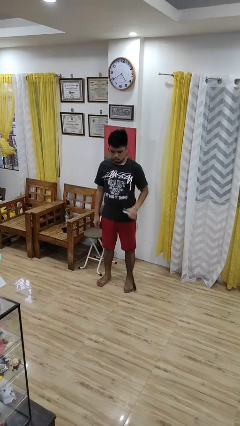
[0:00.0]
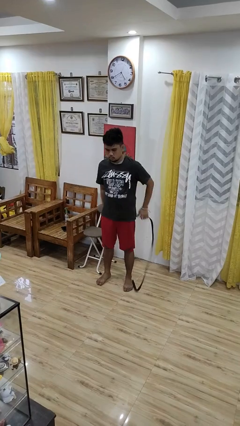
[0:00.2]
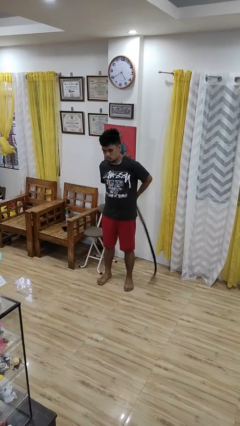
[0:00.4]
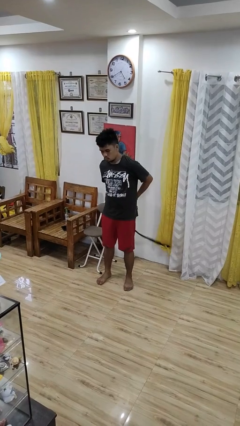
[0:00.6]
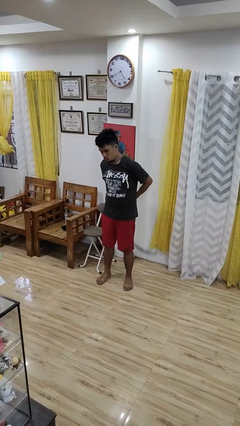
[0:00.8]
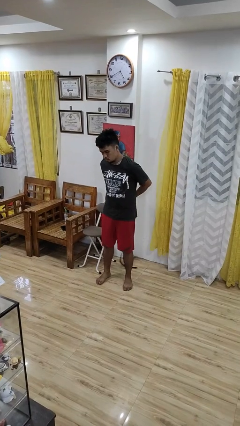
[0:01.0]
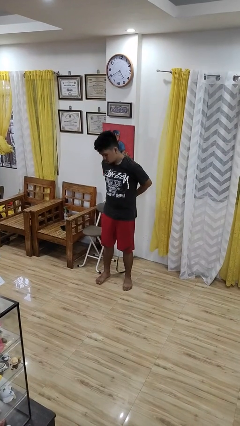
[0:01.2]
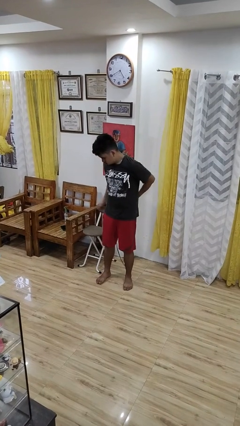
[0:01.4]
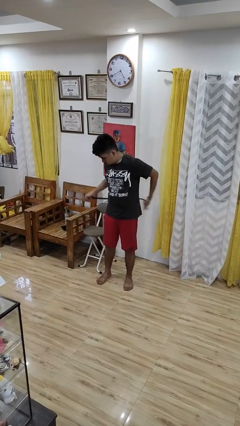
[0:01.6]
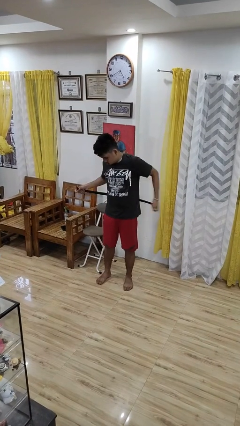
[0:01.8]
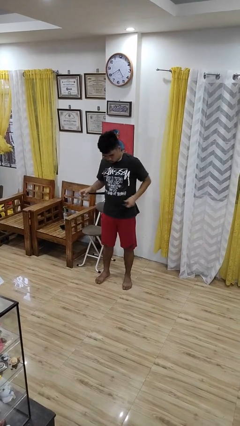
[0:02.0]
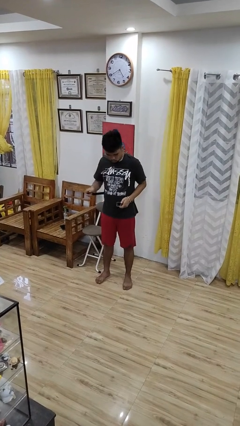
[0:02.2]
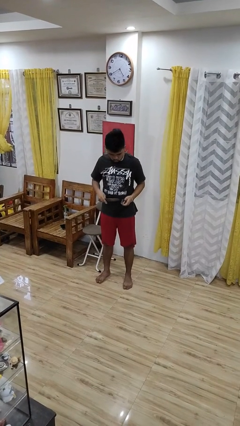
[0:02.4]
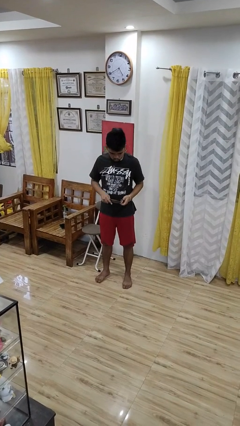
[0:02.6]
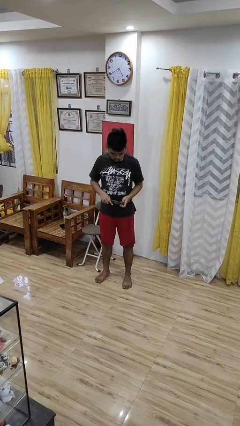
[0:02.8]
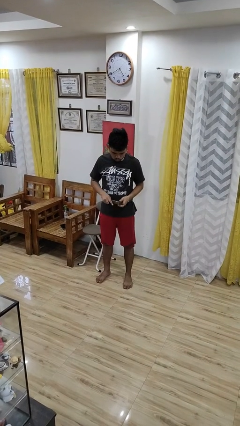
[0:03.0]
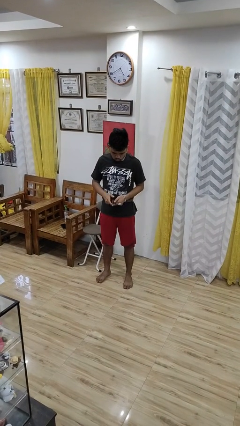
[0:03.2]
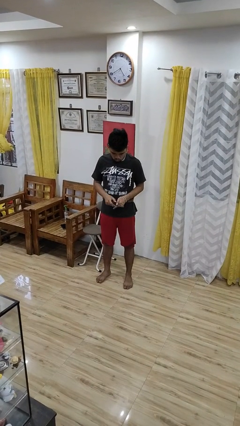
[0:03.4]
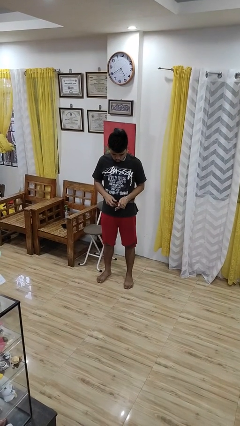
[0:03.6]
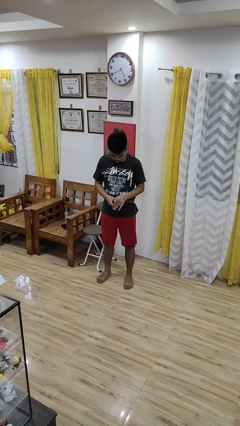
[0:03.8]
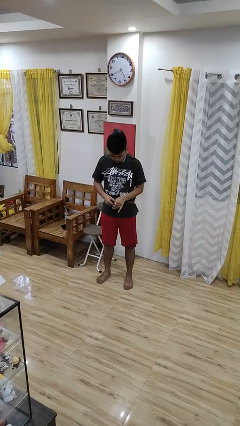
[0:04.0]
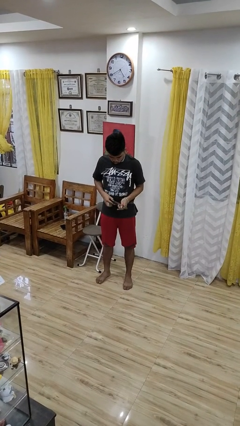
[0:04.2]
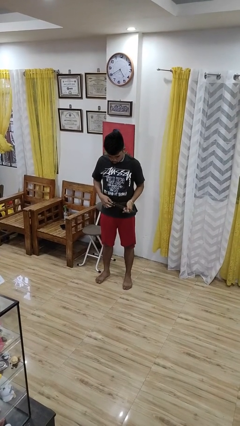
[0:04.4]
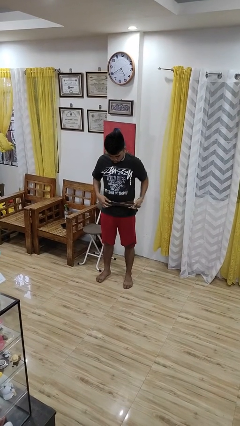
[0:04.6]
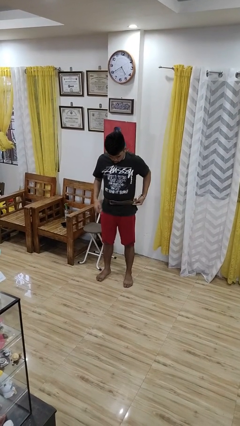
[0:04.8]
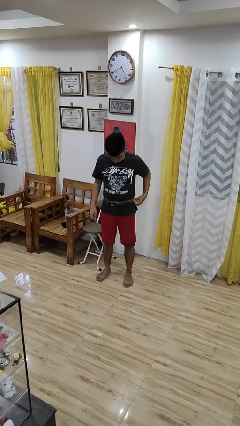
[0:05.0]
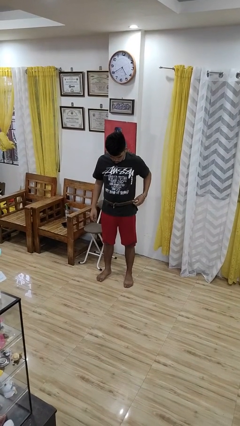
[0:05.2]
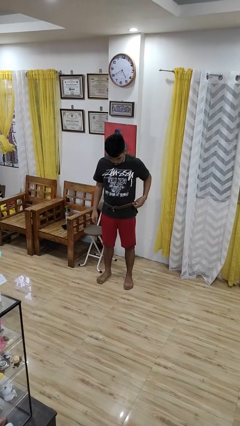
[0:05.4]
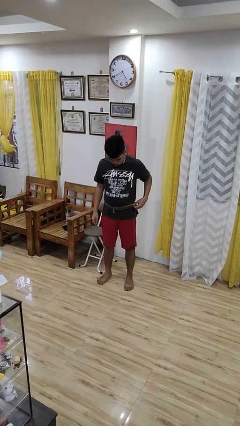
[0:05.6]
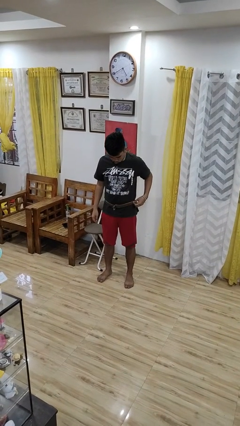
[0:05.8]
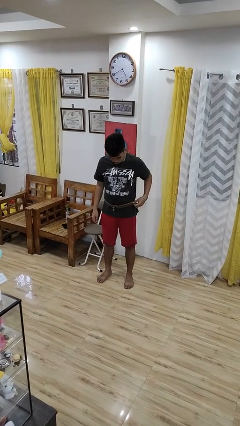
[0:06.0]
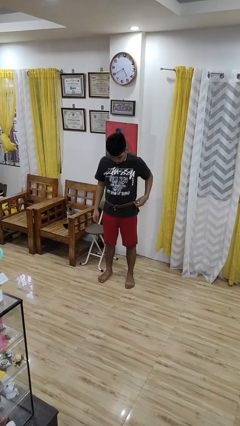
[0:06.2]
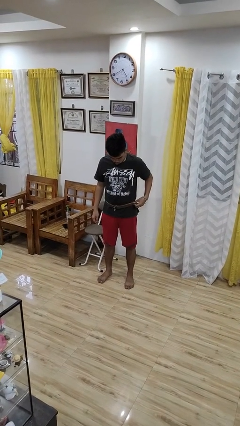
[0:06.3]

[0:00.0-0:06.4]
person puts on belt

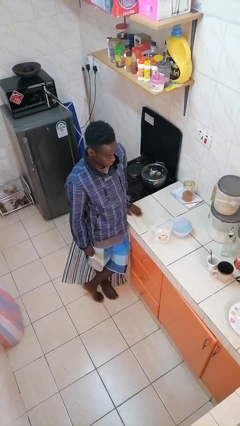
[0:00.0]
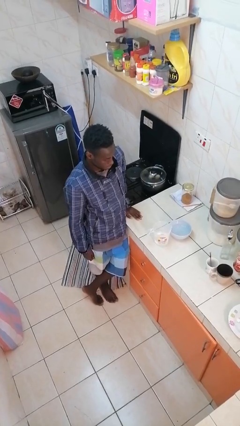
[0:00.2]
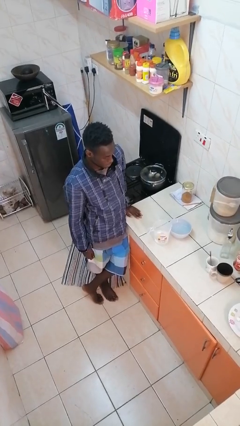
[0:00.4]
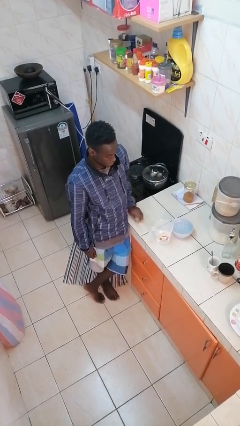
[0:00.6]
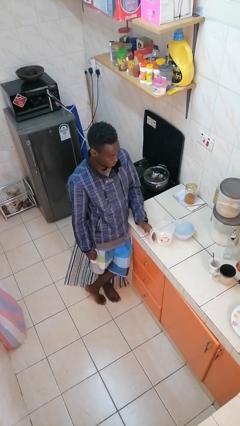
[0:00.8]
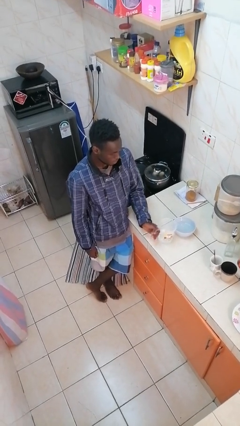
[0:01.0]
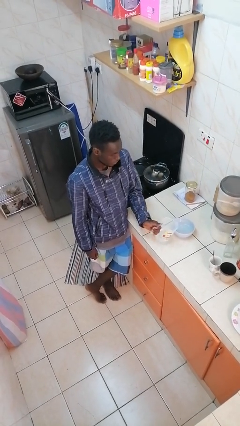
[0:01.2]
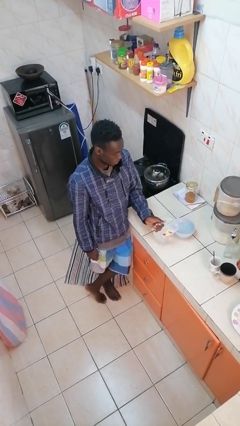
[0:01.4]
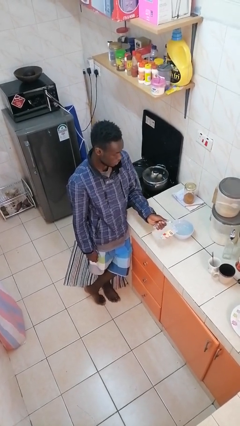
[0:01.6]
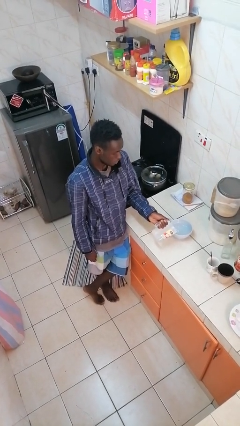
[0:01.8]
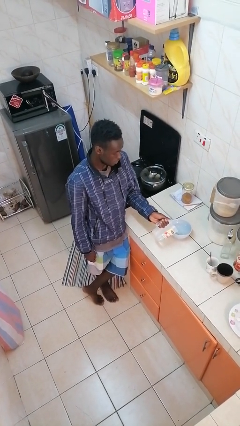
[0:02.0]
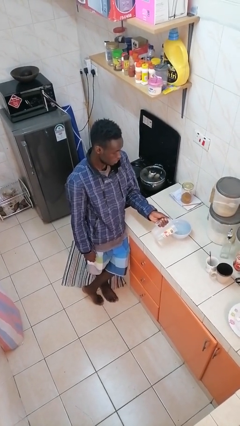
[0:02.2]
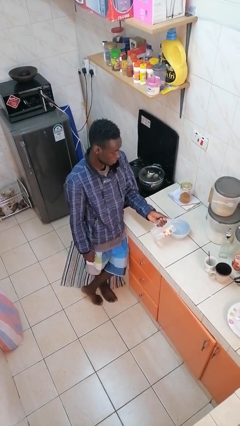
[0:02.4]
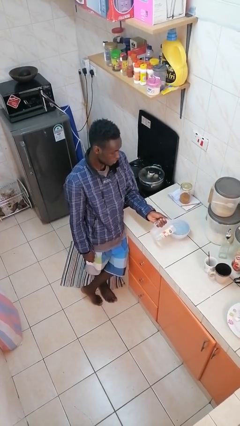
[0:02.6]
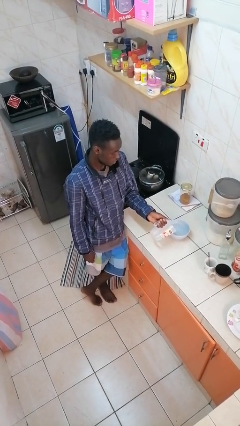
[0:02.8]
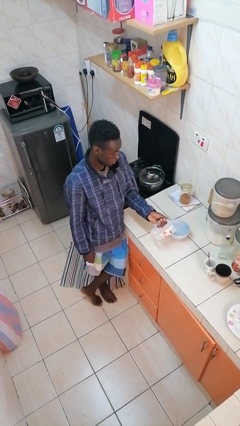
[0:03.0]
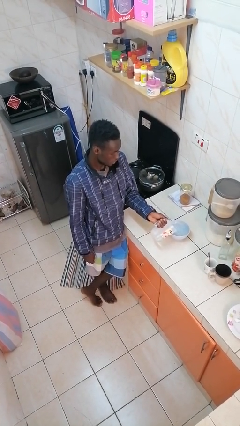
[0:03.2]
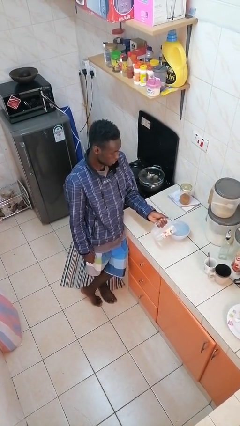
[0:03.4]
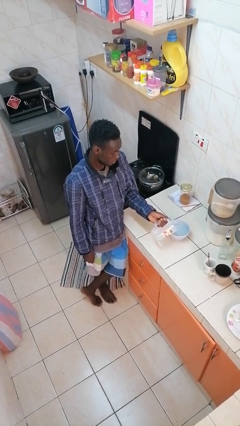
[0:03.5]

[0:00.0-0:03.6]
person pours into bowl

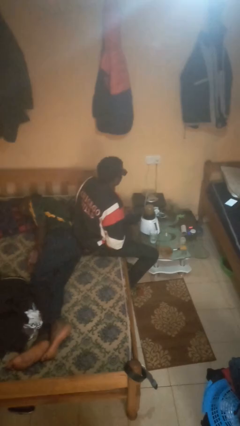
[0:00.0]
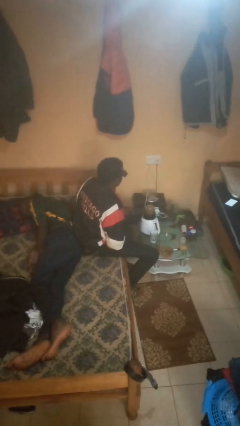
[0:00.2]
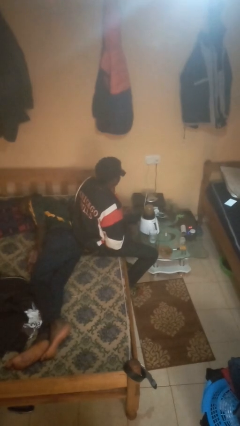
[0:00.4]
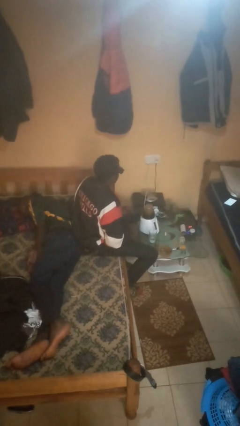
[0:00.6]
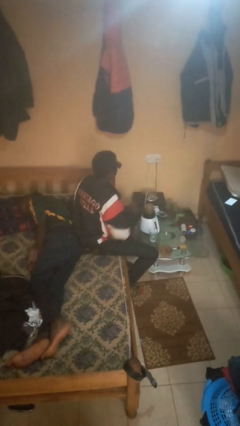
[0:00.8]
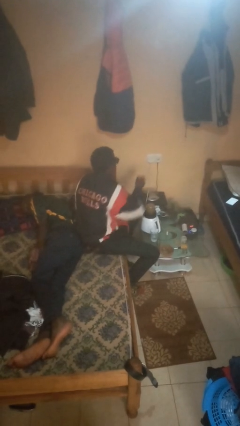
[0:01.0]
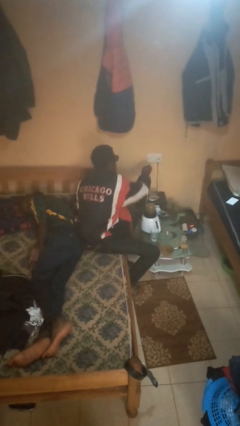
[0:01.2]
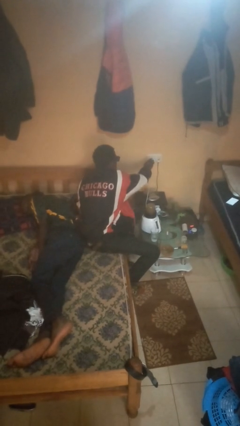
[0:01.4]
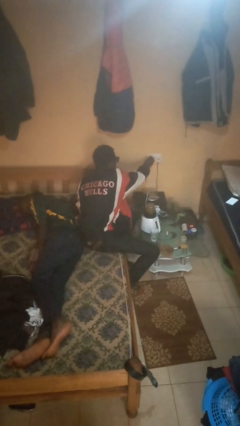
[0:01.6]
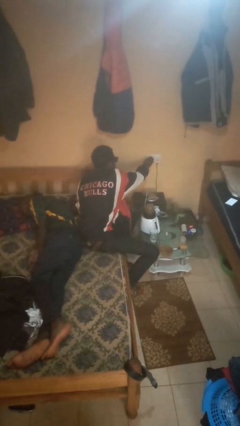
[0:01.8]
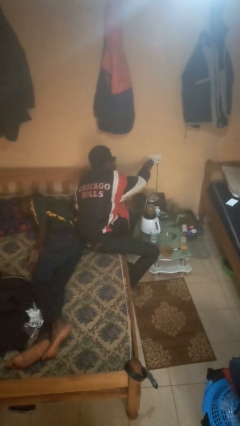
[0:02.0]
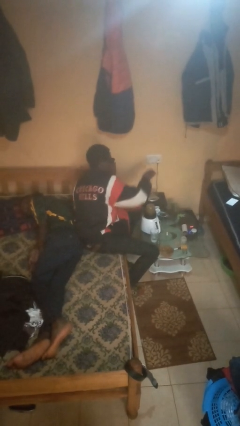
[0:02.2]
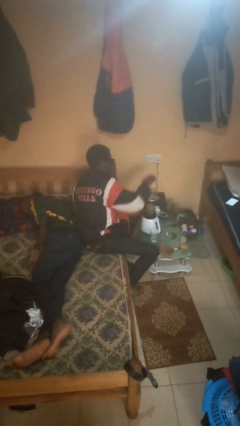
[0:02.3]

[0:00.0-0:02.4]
person unplugs from electrical socket

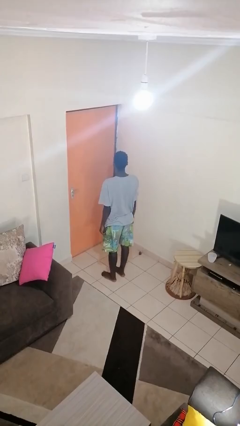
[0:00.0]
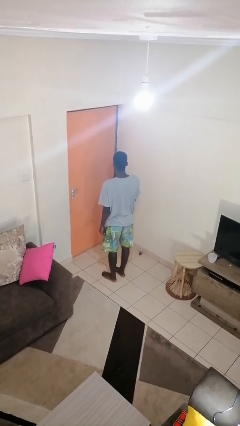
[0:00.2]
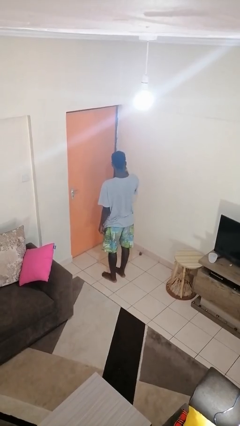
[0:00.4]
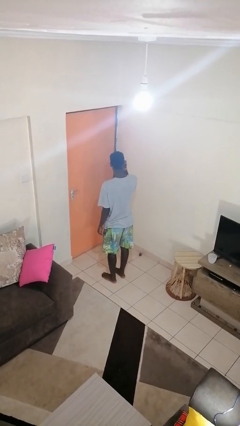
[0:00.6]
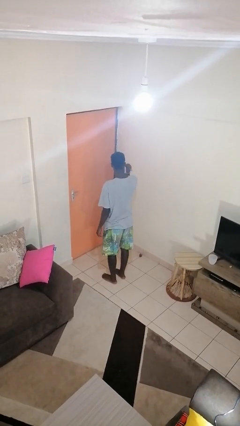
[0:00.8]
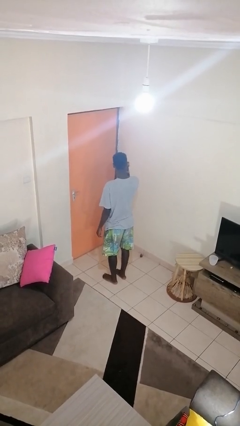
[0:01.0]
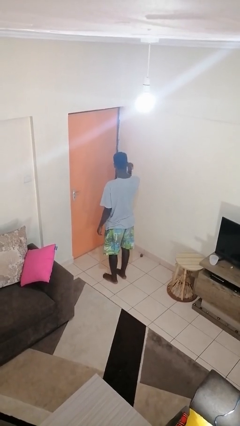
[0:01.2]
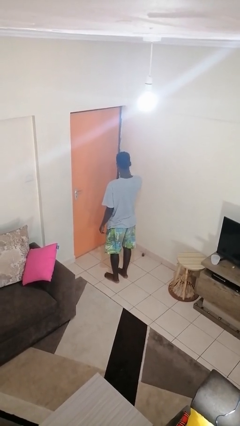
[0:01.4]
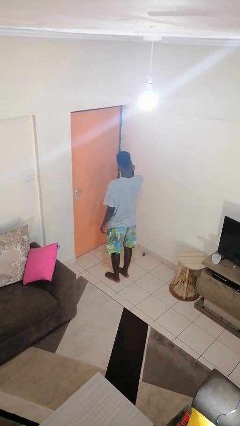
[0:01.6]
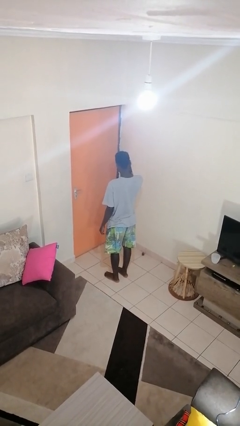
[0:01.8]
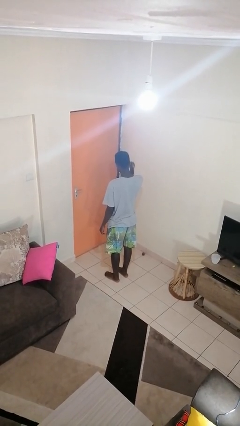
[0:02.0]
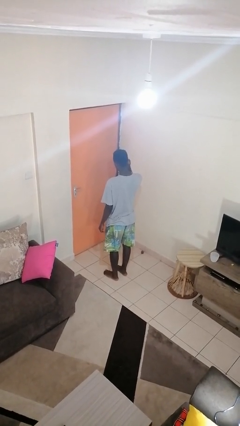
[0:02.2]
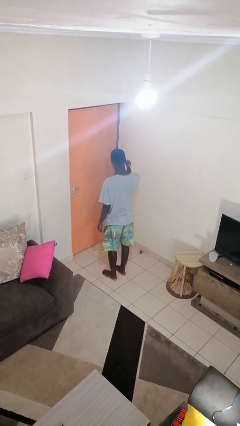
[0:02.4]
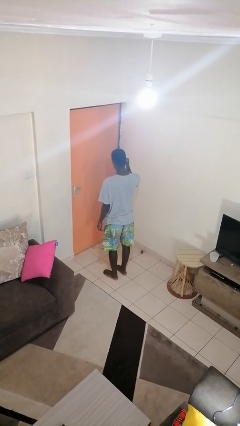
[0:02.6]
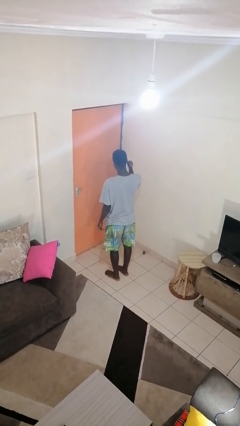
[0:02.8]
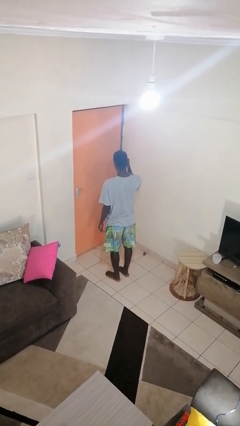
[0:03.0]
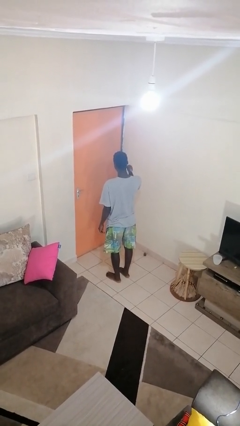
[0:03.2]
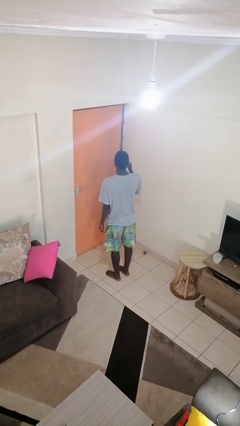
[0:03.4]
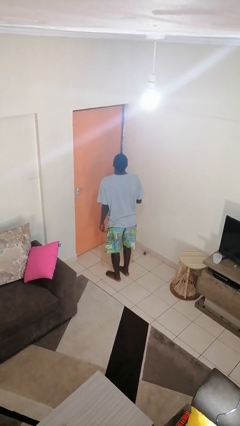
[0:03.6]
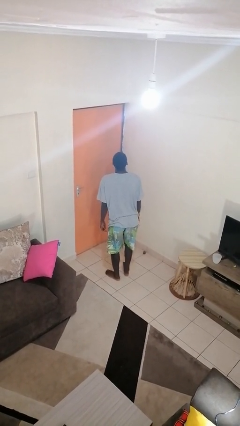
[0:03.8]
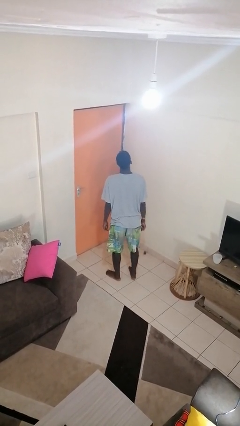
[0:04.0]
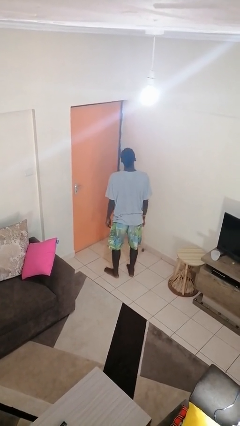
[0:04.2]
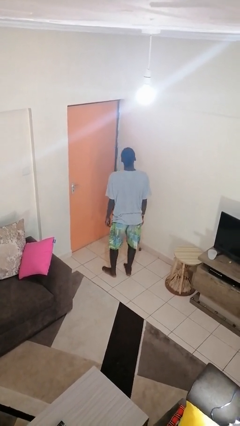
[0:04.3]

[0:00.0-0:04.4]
person gestures behind me

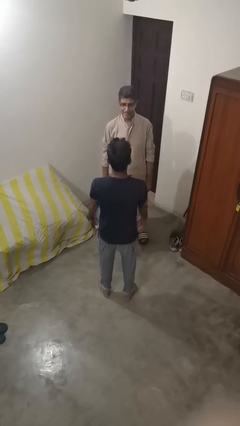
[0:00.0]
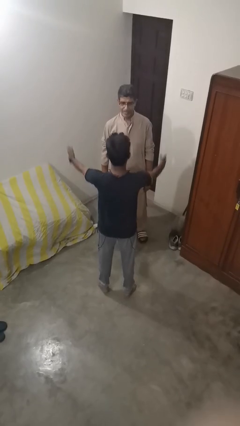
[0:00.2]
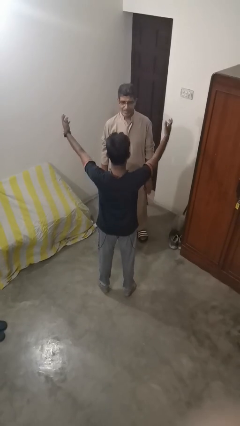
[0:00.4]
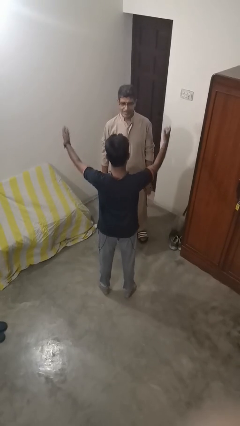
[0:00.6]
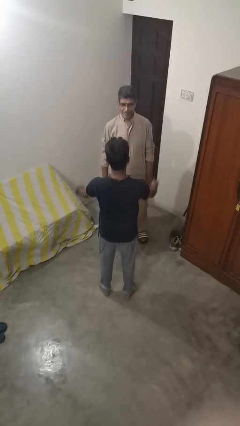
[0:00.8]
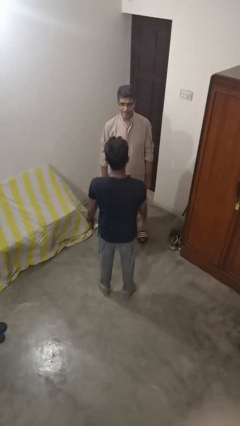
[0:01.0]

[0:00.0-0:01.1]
person laughs with person
